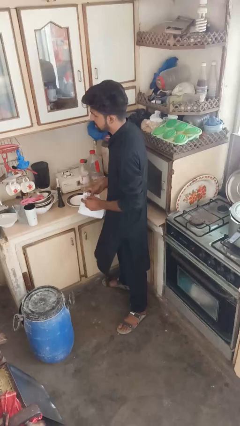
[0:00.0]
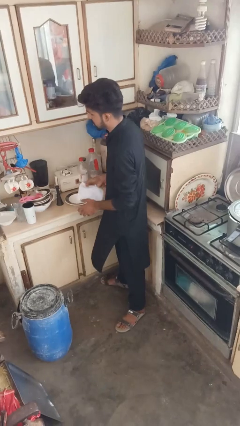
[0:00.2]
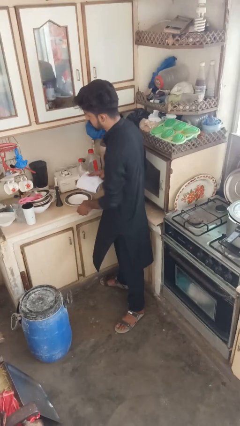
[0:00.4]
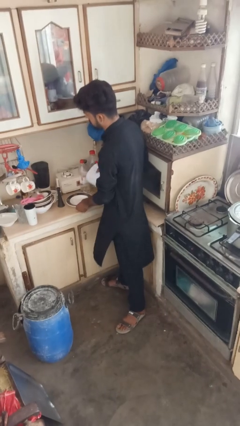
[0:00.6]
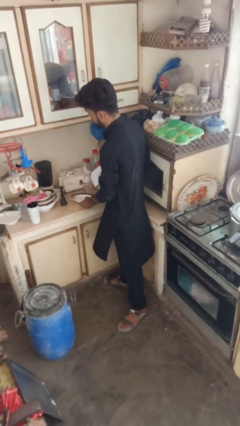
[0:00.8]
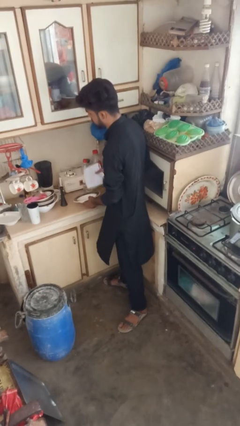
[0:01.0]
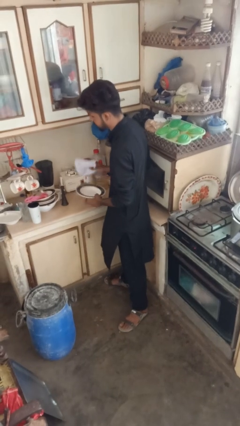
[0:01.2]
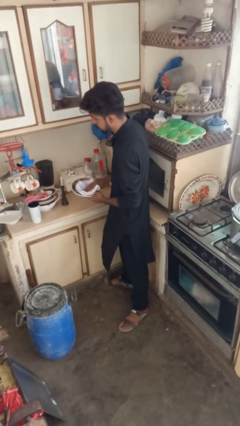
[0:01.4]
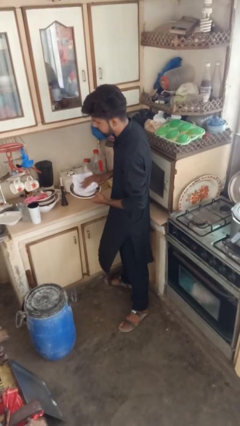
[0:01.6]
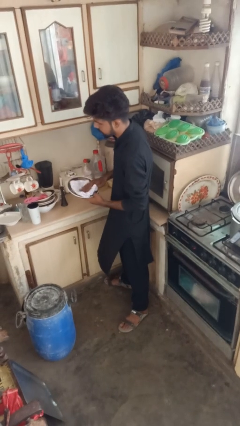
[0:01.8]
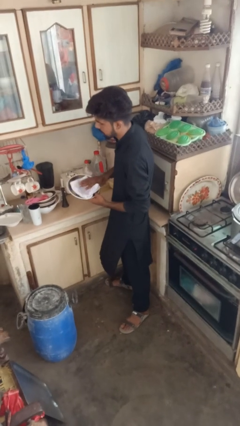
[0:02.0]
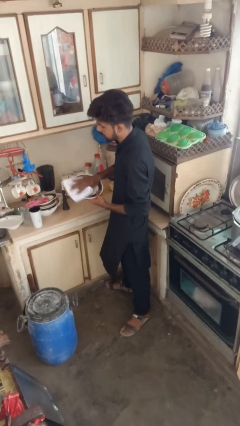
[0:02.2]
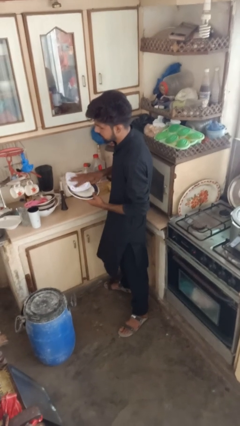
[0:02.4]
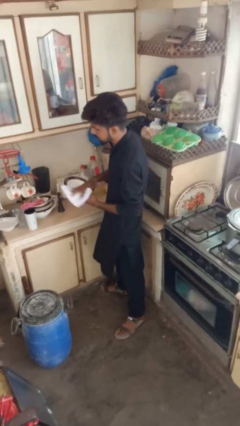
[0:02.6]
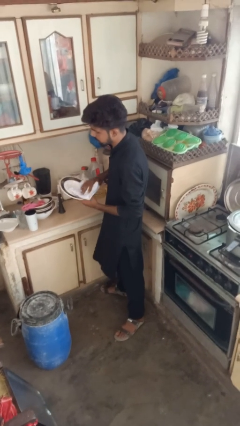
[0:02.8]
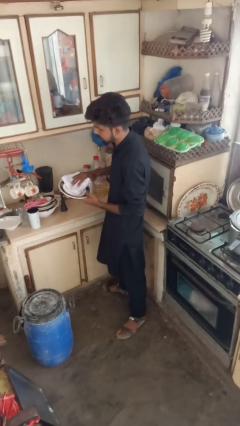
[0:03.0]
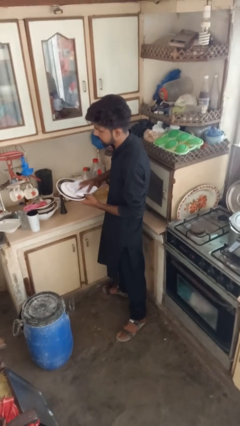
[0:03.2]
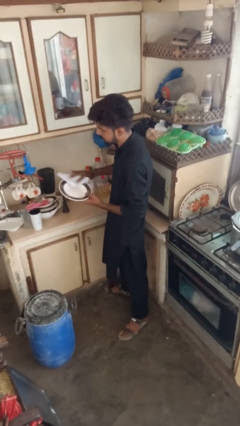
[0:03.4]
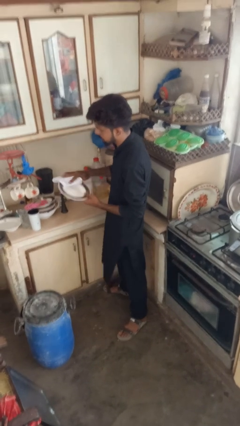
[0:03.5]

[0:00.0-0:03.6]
person dries dish

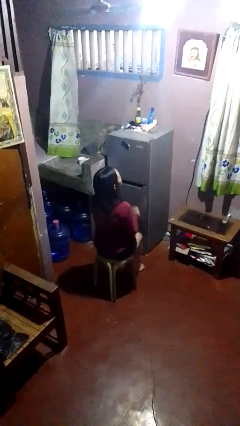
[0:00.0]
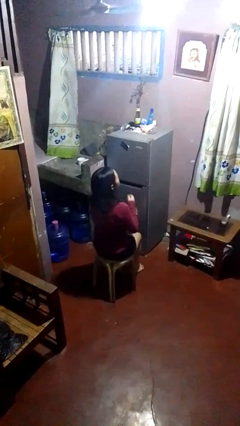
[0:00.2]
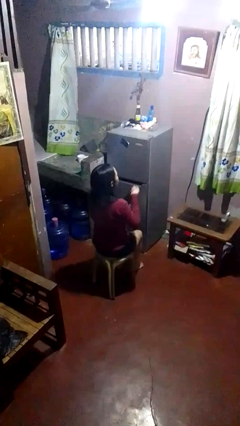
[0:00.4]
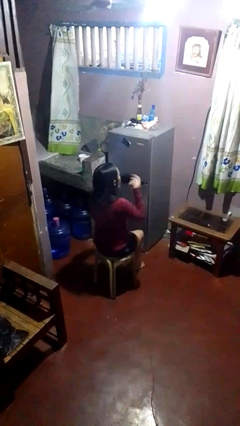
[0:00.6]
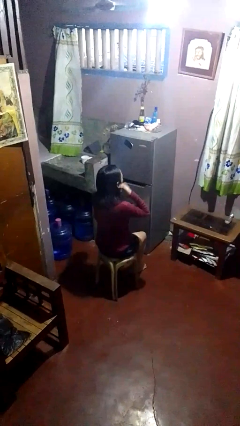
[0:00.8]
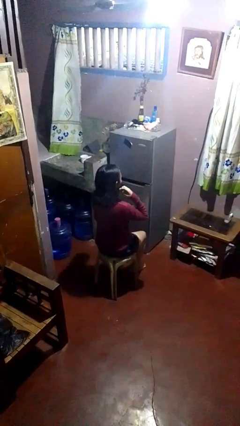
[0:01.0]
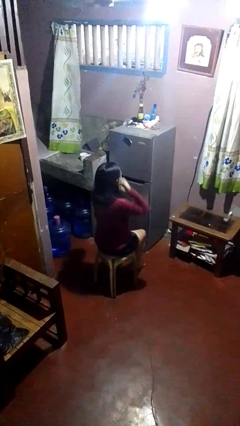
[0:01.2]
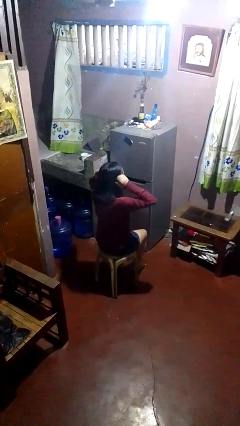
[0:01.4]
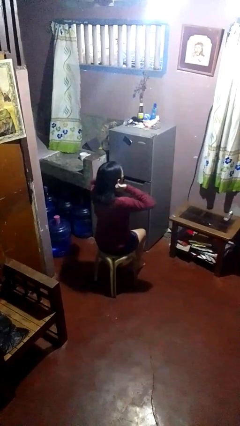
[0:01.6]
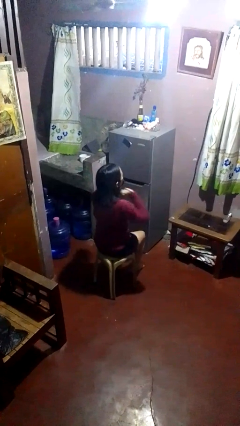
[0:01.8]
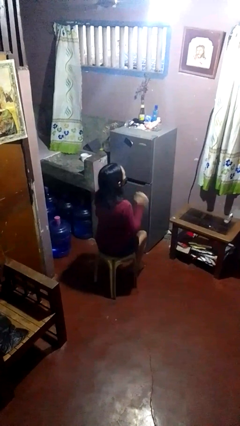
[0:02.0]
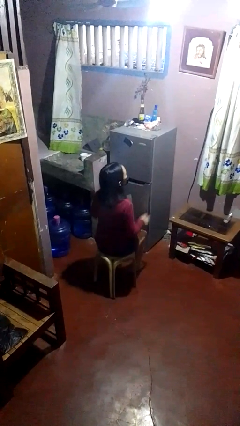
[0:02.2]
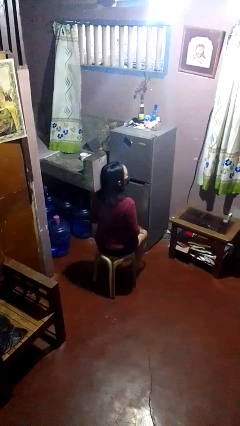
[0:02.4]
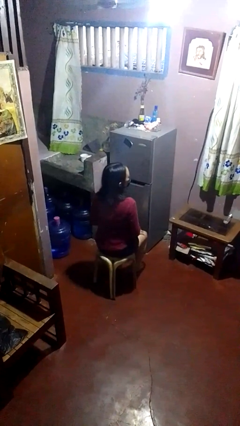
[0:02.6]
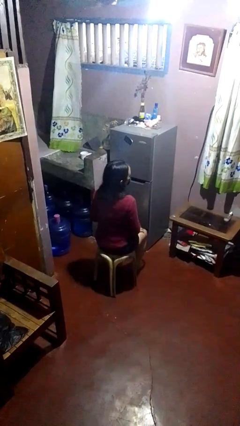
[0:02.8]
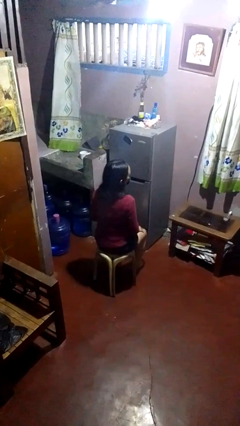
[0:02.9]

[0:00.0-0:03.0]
person puts on facemask

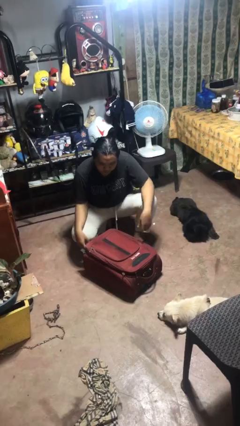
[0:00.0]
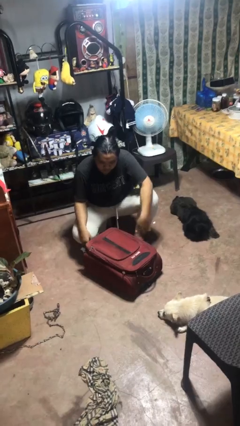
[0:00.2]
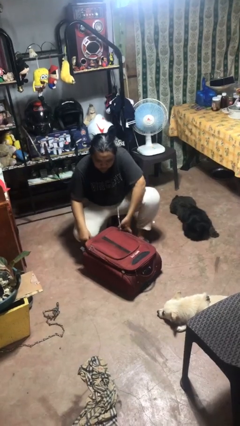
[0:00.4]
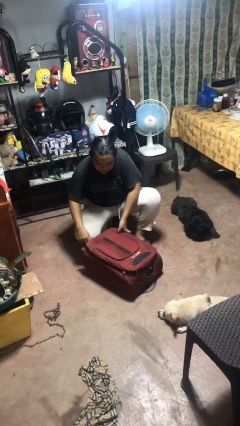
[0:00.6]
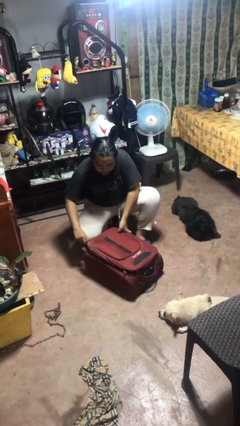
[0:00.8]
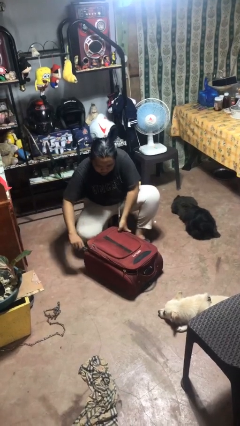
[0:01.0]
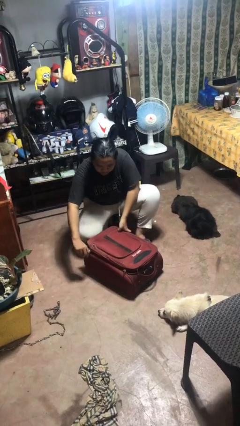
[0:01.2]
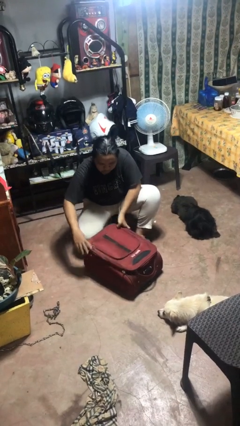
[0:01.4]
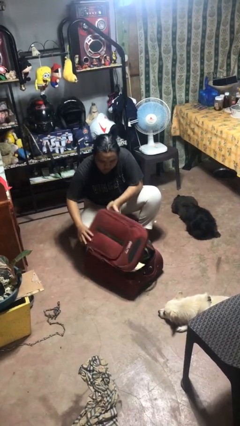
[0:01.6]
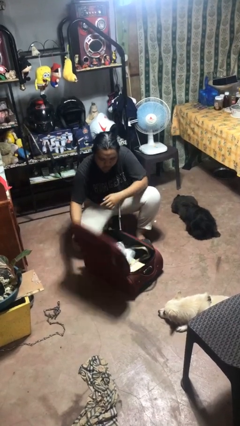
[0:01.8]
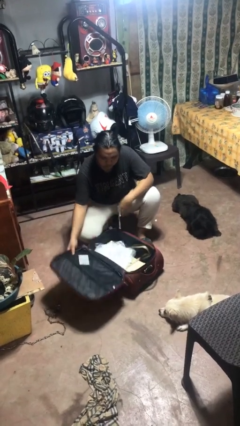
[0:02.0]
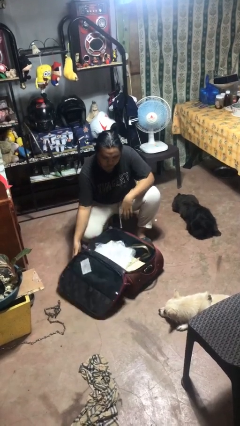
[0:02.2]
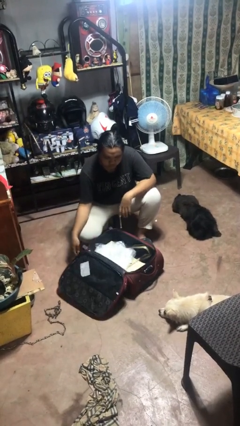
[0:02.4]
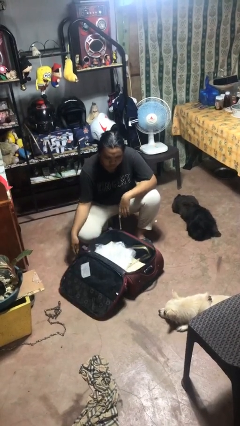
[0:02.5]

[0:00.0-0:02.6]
person opens suitcase

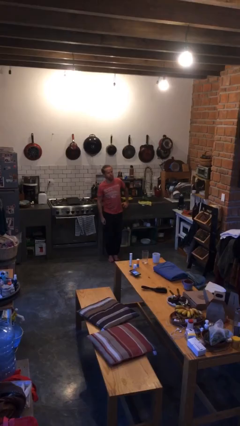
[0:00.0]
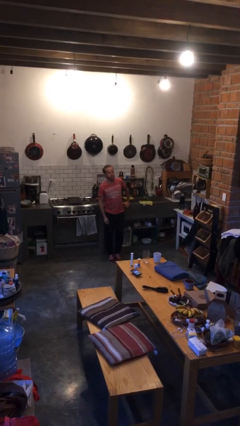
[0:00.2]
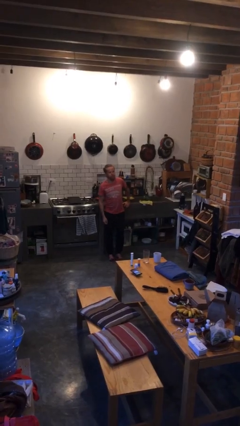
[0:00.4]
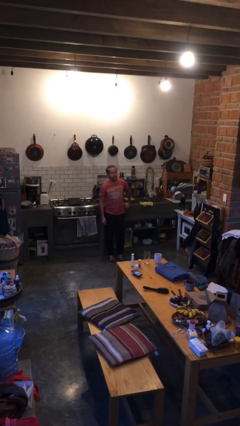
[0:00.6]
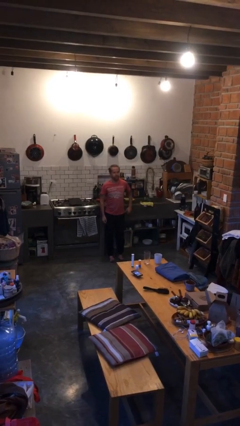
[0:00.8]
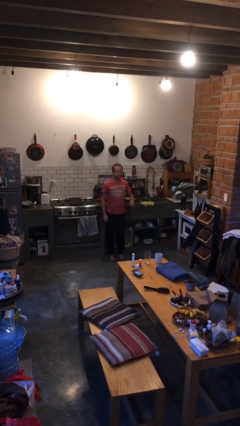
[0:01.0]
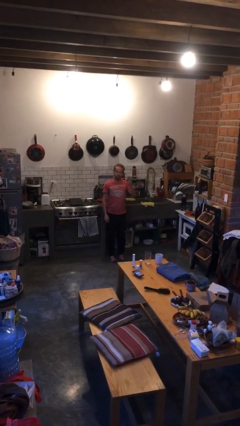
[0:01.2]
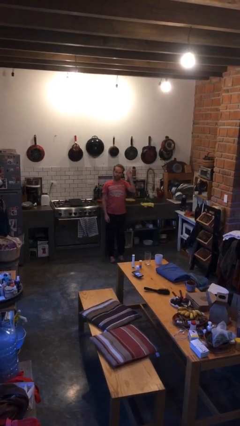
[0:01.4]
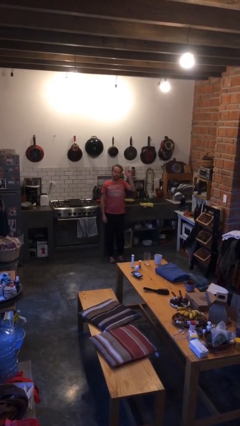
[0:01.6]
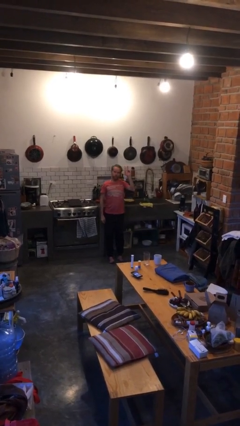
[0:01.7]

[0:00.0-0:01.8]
person gestures raise hand

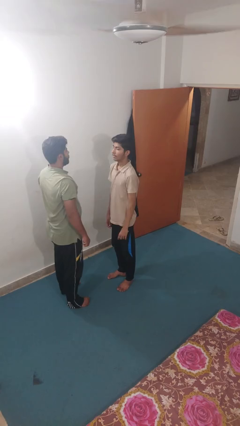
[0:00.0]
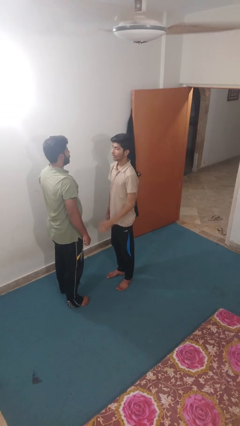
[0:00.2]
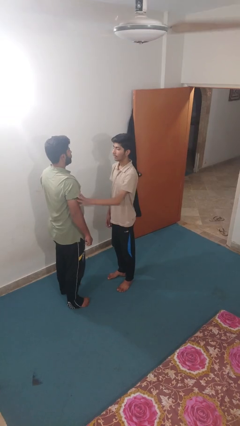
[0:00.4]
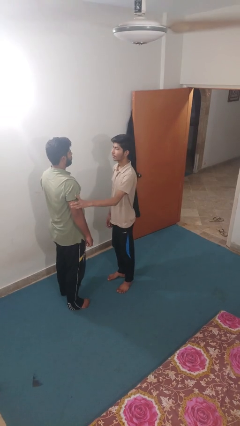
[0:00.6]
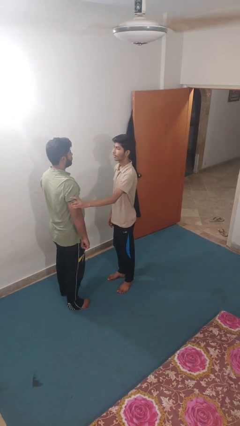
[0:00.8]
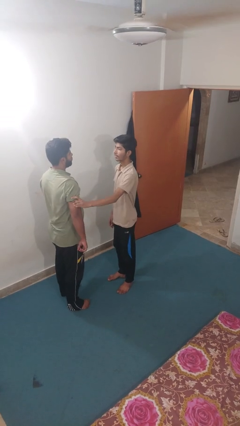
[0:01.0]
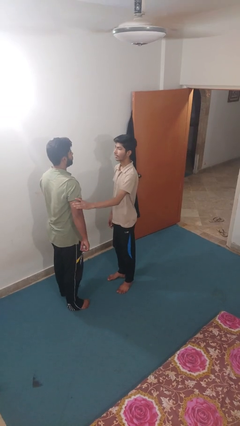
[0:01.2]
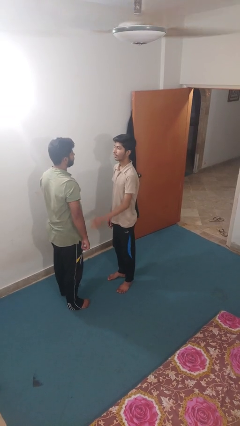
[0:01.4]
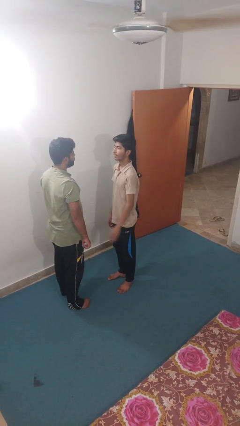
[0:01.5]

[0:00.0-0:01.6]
person grabs person by bicep

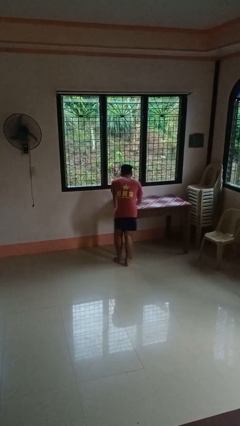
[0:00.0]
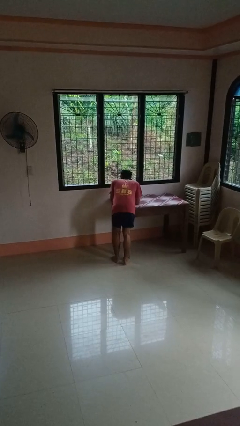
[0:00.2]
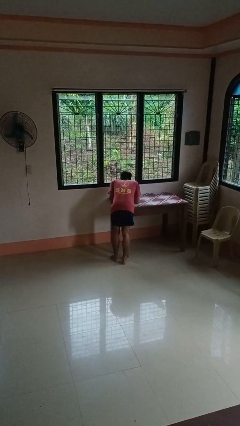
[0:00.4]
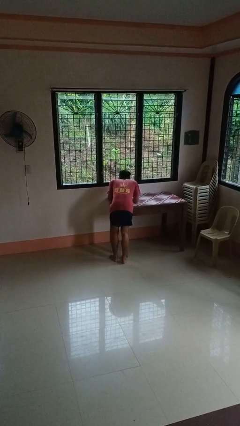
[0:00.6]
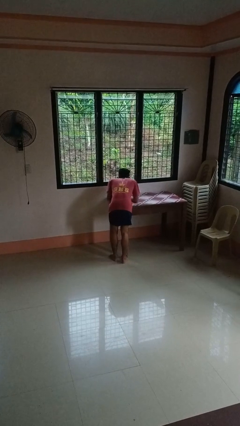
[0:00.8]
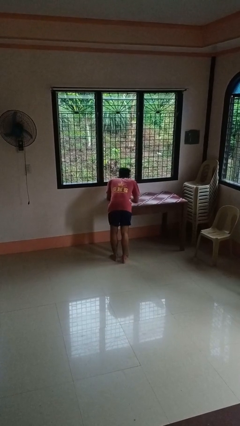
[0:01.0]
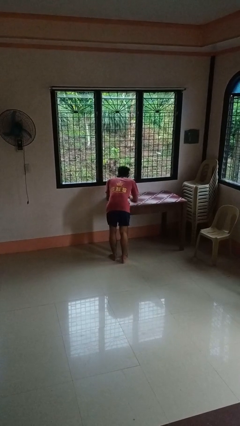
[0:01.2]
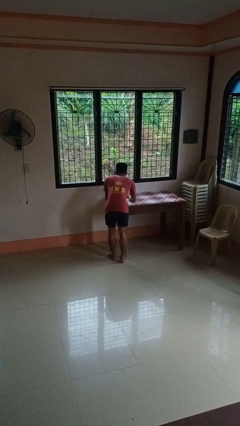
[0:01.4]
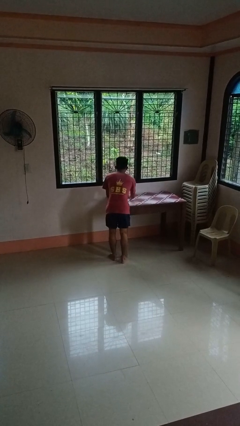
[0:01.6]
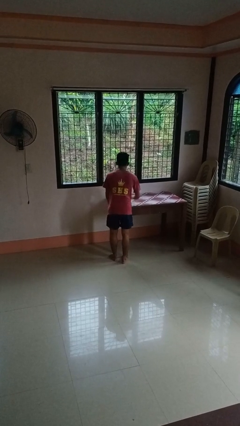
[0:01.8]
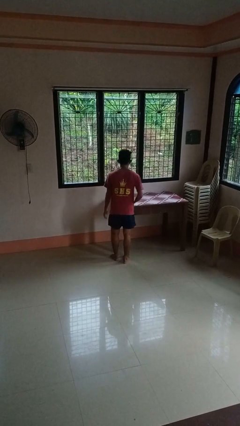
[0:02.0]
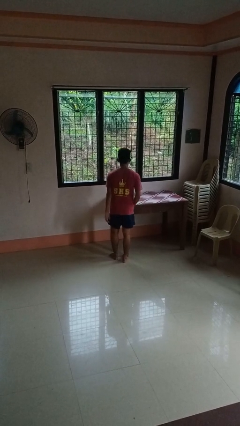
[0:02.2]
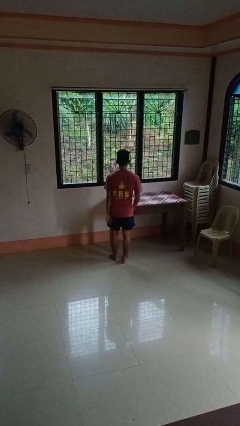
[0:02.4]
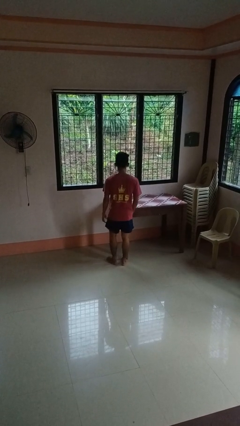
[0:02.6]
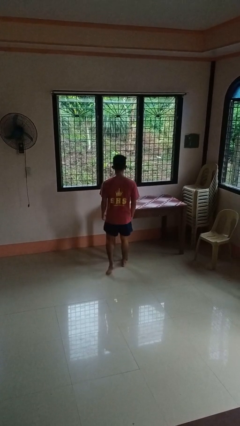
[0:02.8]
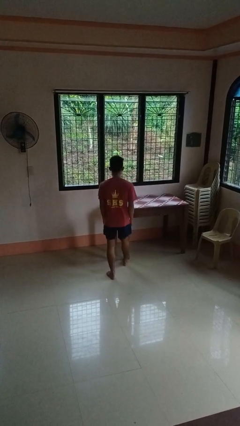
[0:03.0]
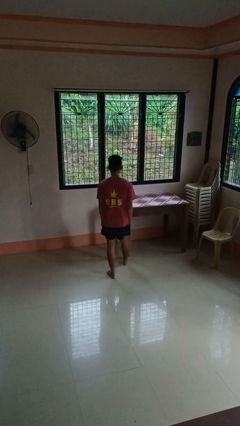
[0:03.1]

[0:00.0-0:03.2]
person bumps into table

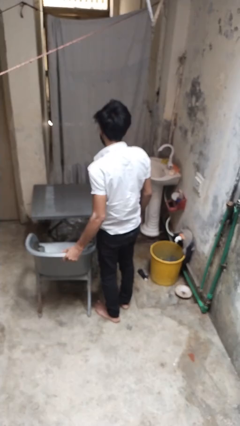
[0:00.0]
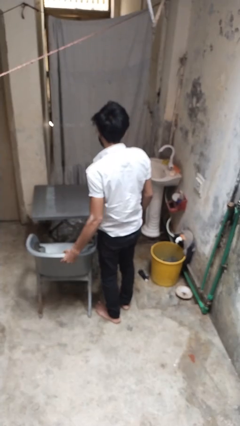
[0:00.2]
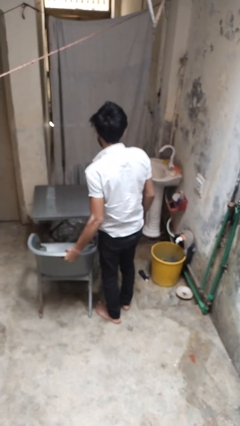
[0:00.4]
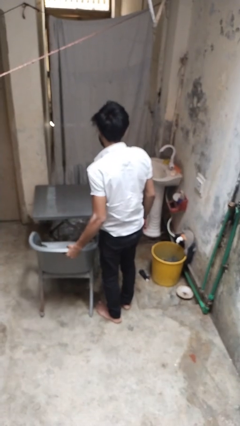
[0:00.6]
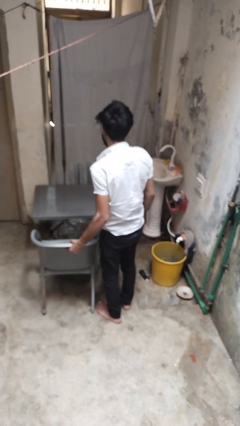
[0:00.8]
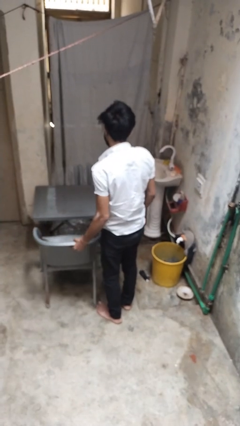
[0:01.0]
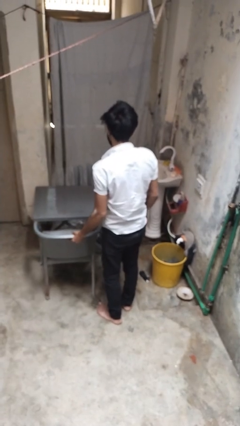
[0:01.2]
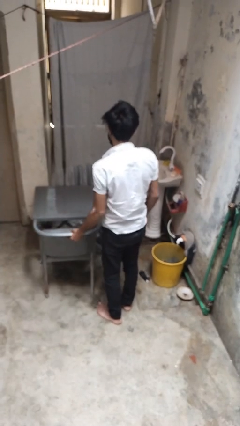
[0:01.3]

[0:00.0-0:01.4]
person pushes in chair
